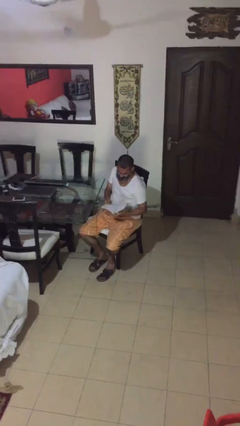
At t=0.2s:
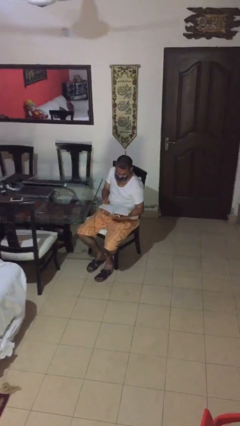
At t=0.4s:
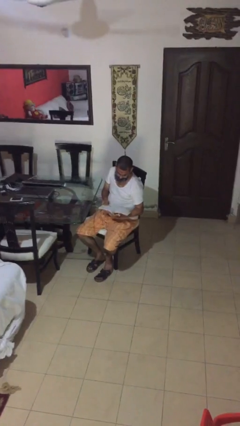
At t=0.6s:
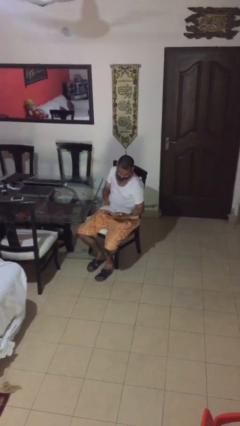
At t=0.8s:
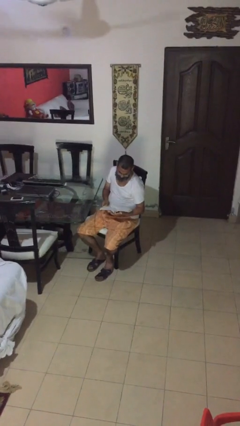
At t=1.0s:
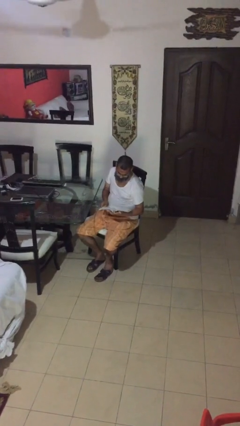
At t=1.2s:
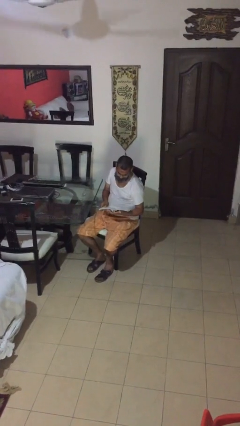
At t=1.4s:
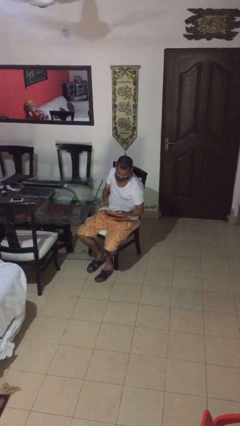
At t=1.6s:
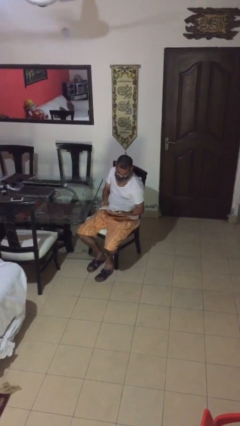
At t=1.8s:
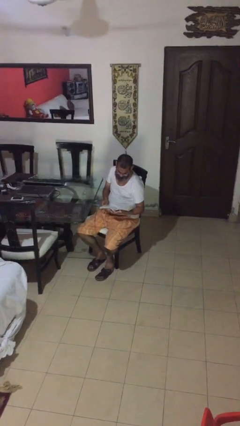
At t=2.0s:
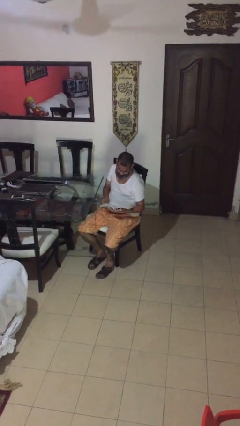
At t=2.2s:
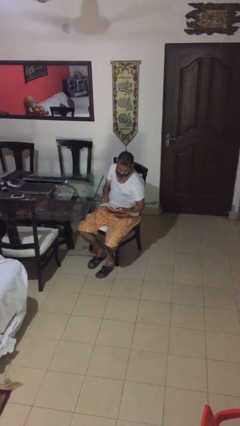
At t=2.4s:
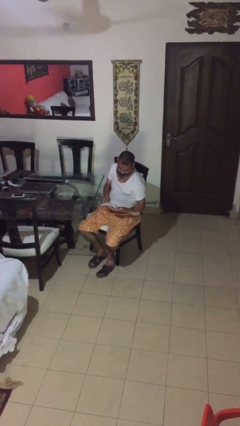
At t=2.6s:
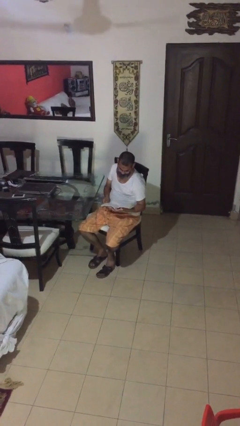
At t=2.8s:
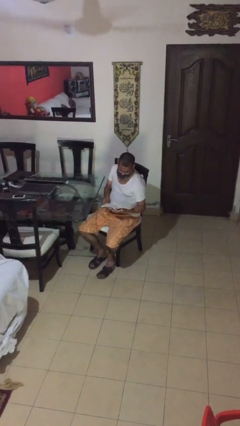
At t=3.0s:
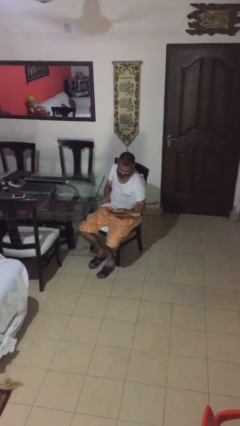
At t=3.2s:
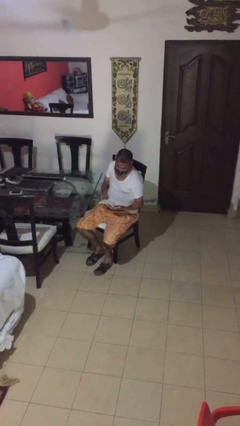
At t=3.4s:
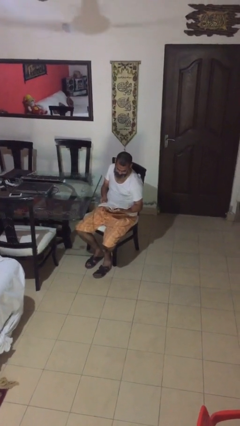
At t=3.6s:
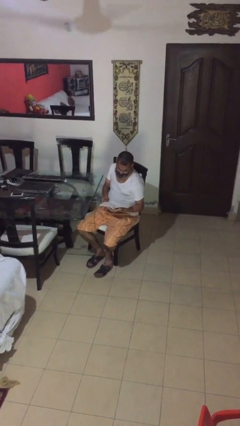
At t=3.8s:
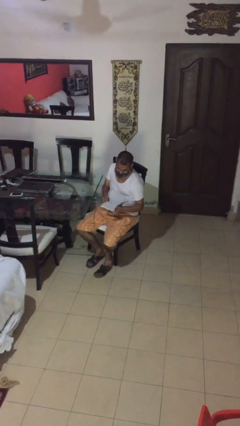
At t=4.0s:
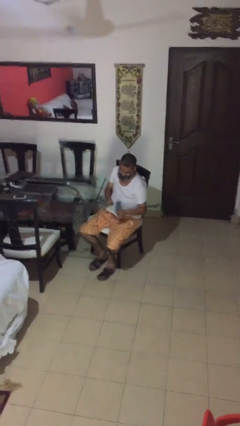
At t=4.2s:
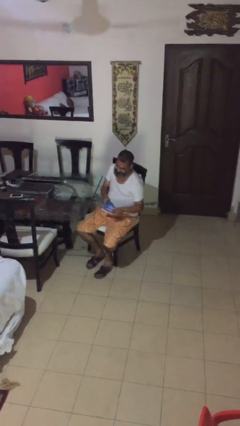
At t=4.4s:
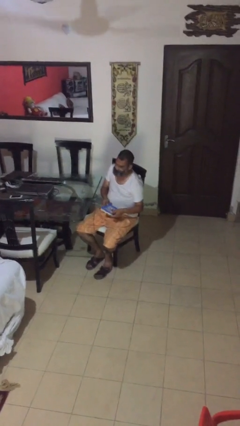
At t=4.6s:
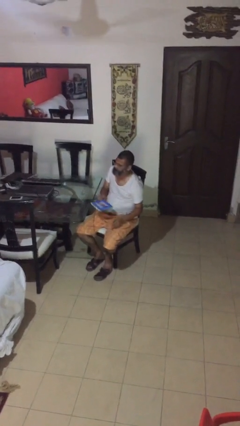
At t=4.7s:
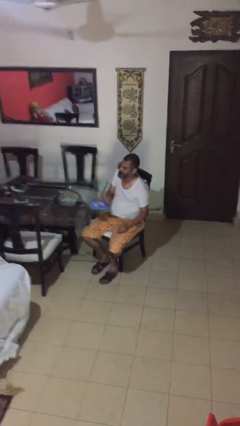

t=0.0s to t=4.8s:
person reads document

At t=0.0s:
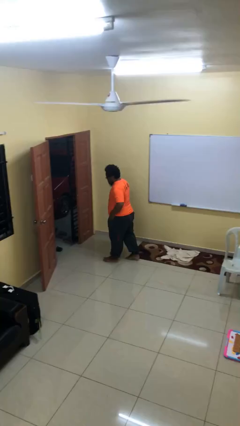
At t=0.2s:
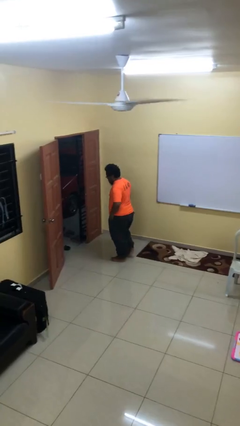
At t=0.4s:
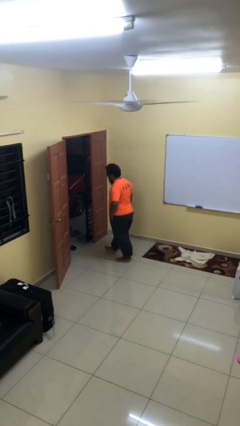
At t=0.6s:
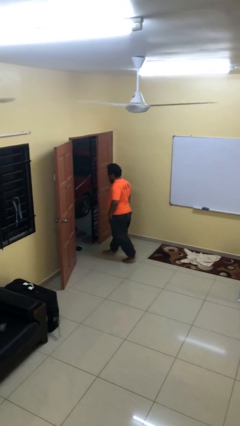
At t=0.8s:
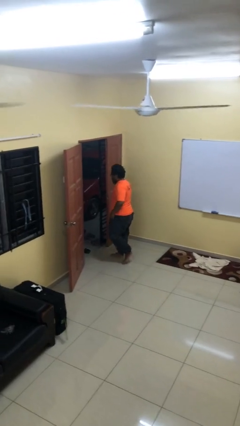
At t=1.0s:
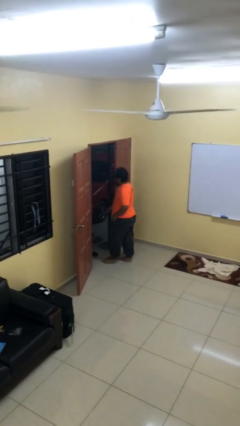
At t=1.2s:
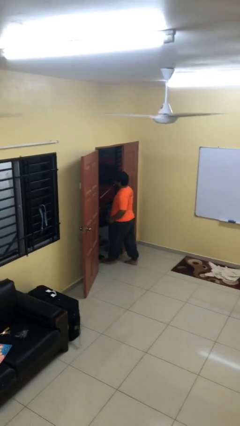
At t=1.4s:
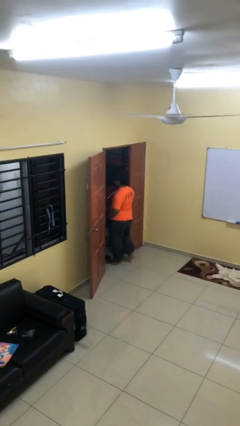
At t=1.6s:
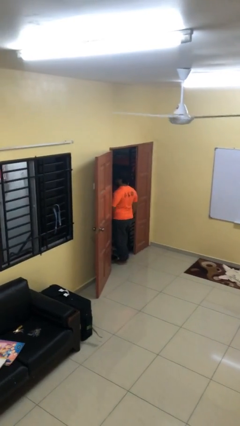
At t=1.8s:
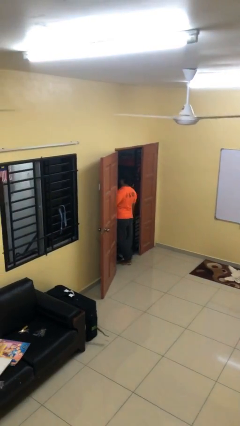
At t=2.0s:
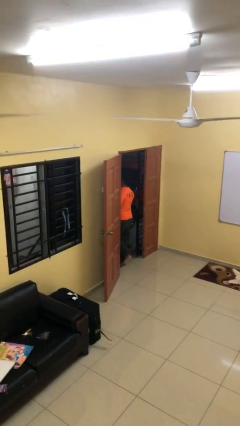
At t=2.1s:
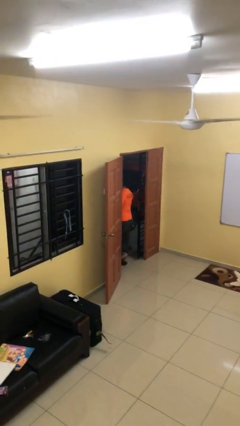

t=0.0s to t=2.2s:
person exits scene through structure

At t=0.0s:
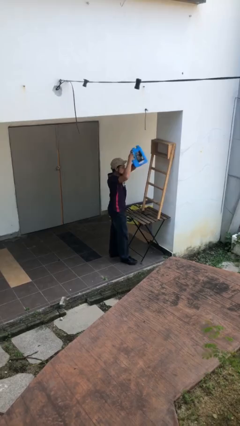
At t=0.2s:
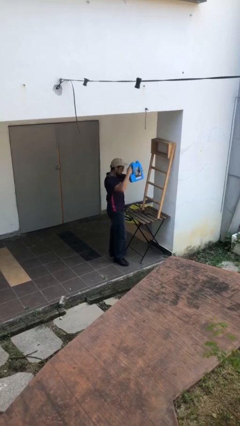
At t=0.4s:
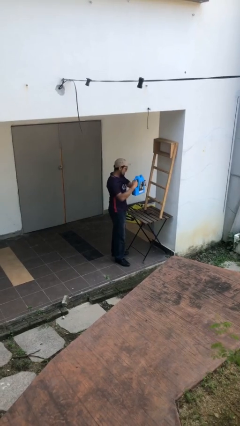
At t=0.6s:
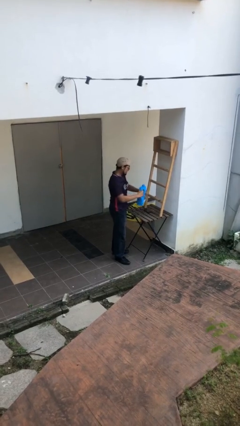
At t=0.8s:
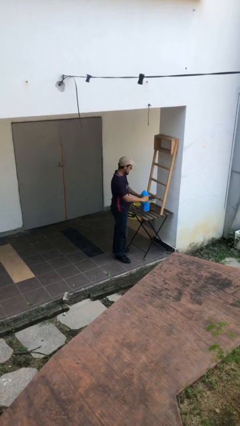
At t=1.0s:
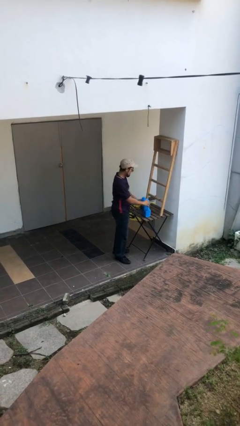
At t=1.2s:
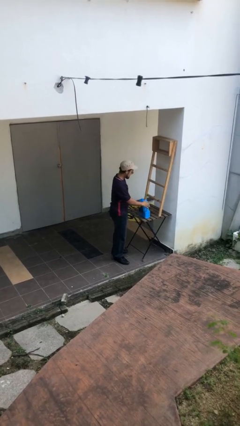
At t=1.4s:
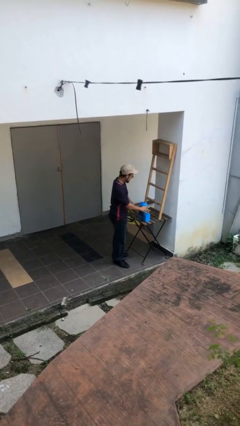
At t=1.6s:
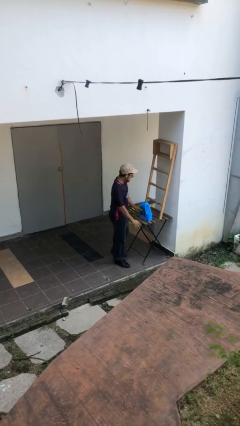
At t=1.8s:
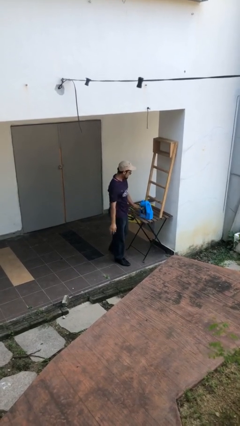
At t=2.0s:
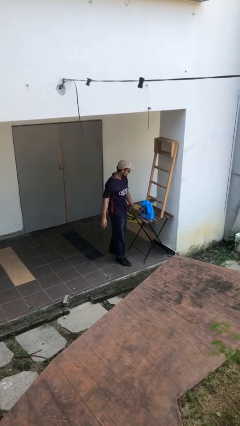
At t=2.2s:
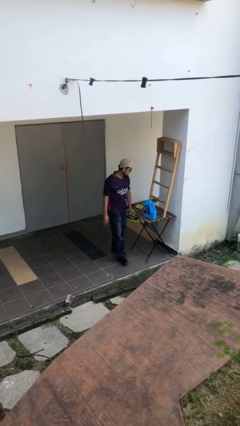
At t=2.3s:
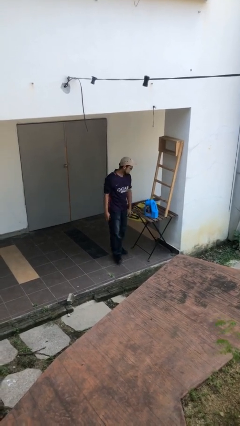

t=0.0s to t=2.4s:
person puts down object on table

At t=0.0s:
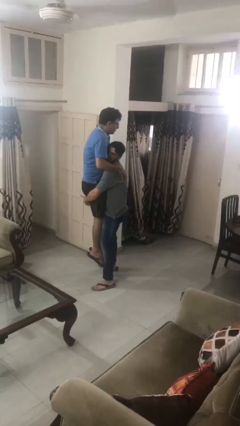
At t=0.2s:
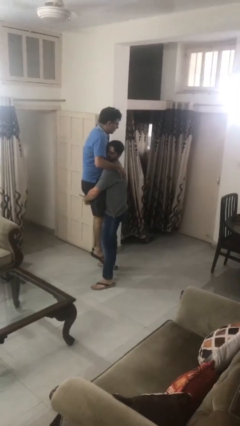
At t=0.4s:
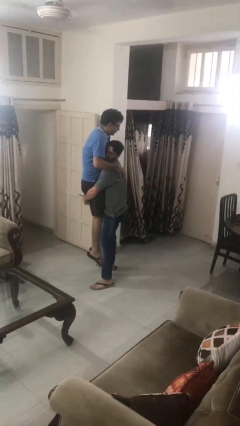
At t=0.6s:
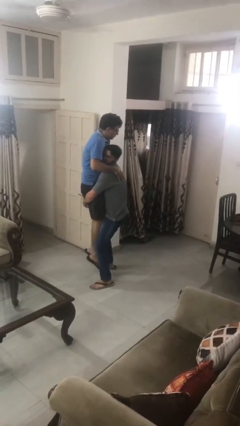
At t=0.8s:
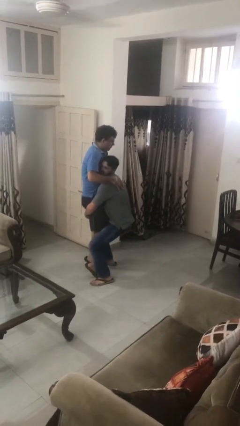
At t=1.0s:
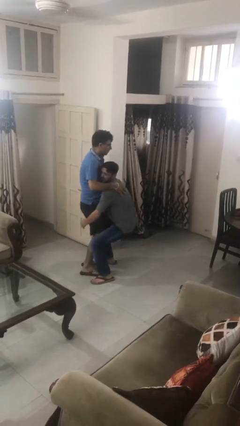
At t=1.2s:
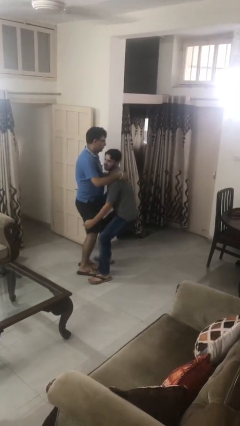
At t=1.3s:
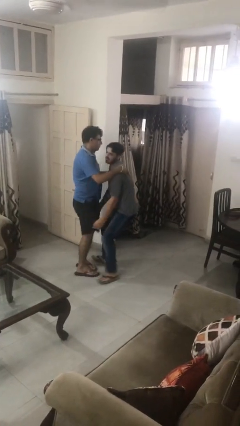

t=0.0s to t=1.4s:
person puts down person

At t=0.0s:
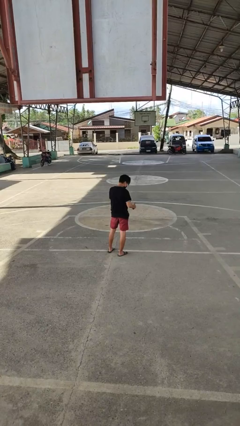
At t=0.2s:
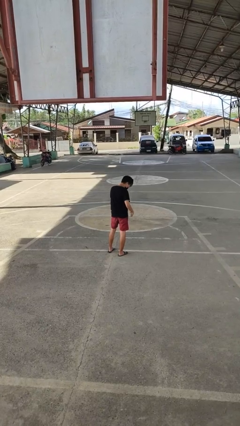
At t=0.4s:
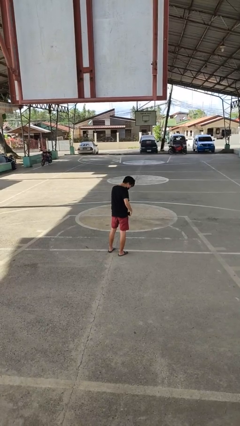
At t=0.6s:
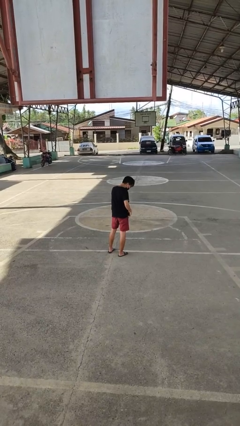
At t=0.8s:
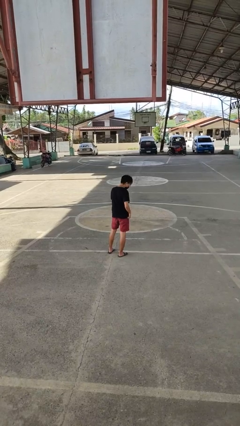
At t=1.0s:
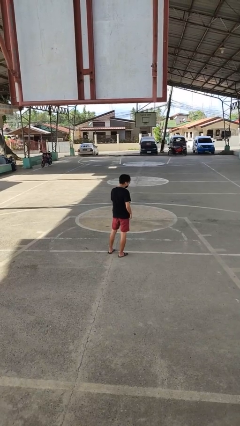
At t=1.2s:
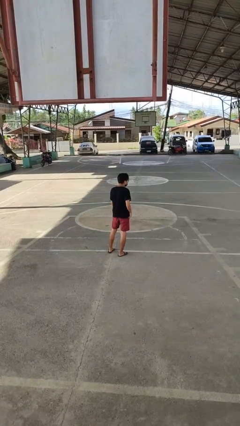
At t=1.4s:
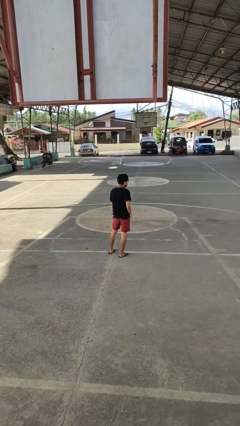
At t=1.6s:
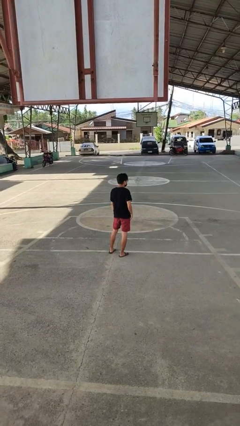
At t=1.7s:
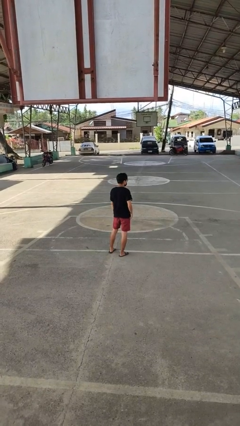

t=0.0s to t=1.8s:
person puts phone into pocket

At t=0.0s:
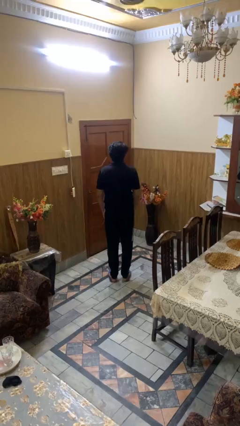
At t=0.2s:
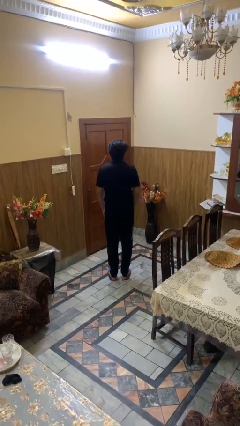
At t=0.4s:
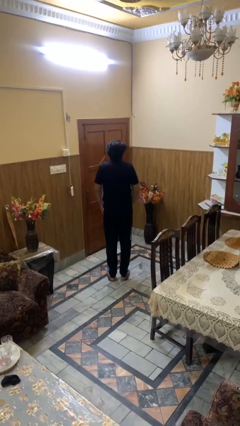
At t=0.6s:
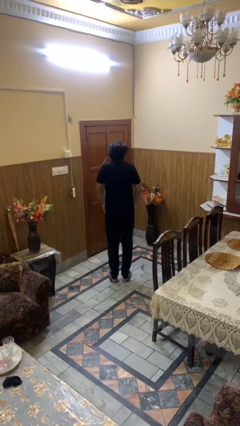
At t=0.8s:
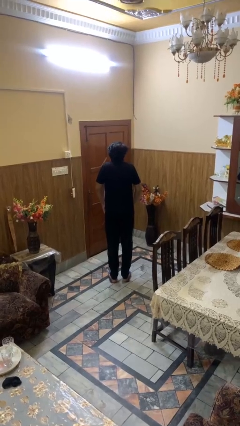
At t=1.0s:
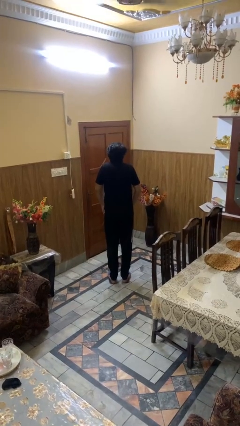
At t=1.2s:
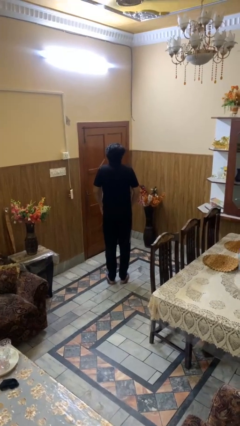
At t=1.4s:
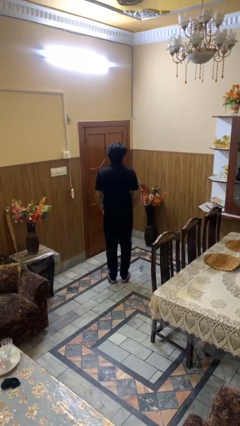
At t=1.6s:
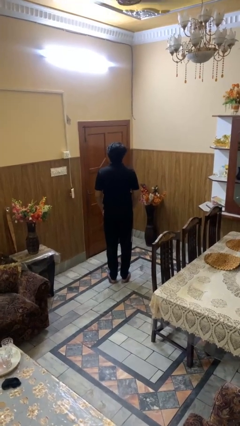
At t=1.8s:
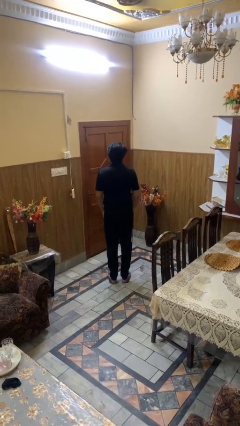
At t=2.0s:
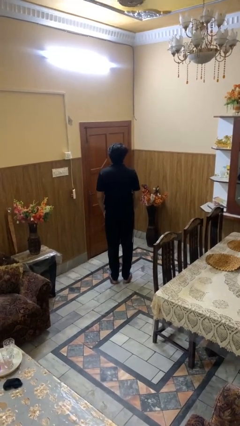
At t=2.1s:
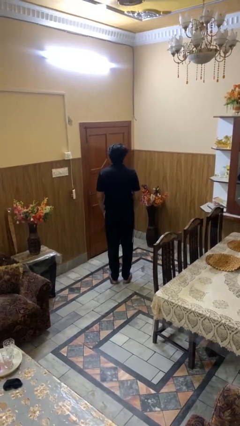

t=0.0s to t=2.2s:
person shrugs

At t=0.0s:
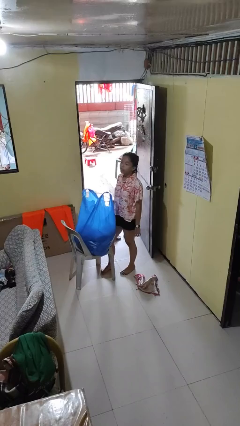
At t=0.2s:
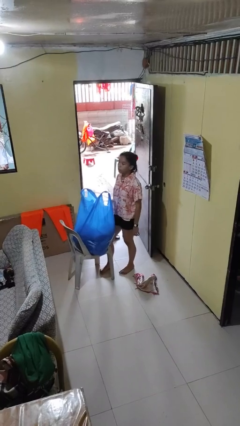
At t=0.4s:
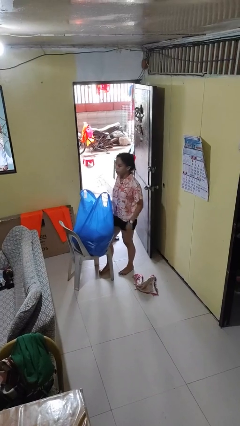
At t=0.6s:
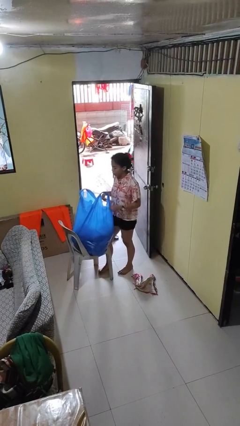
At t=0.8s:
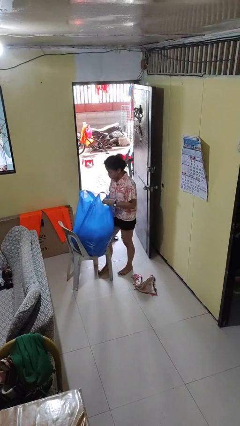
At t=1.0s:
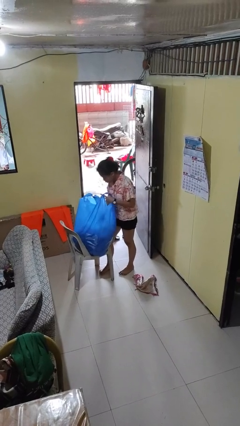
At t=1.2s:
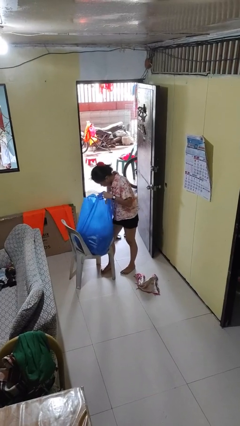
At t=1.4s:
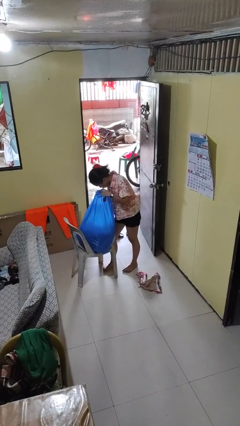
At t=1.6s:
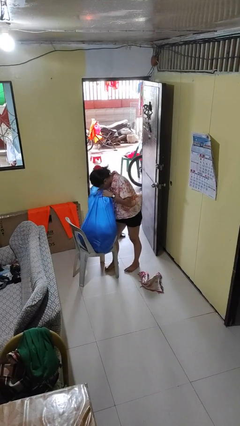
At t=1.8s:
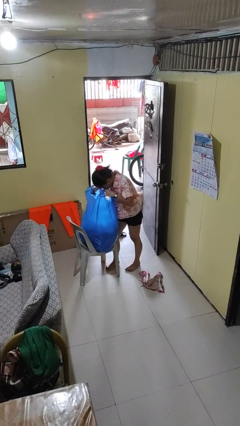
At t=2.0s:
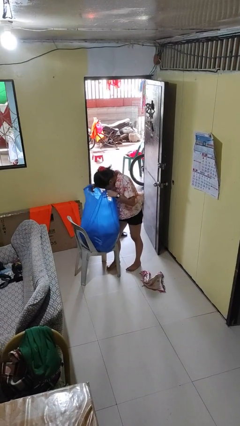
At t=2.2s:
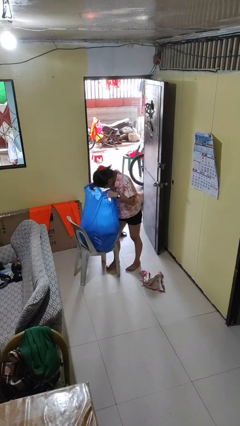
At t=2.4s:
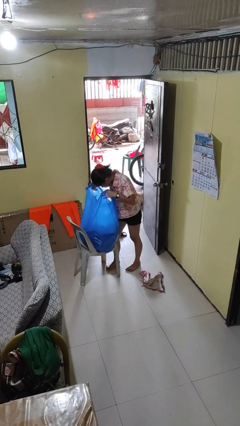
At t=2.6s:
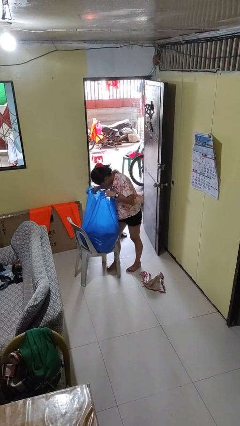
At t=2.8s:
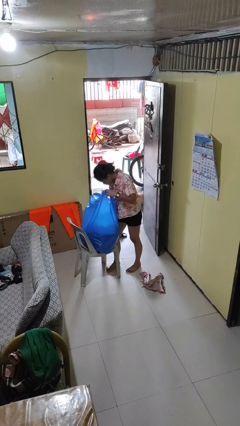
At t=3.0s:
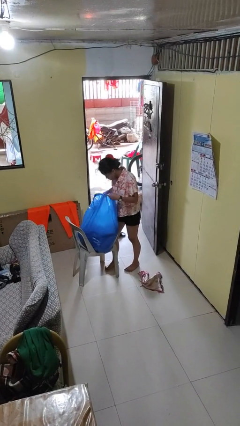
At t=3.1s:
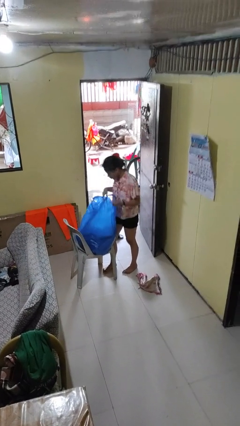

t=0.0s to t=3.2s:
person searches in bag
